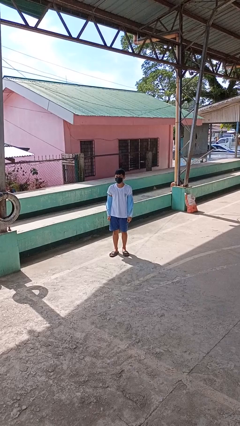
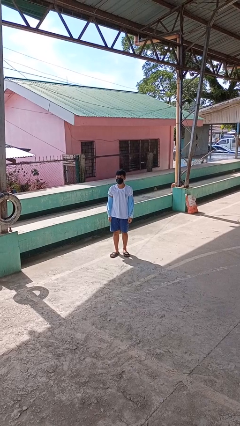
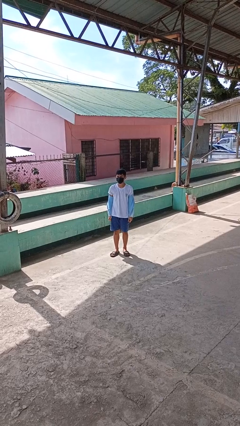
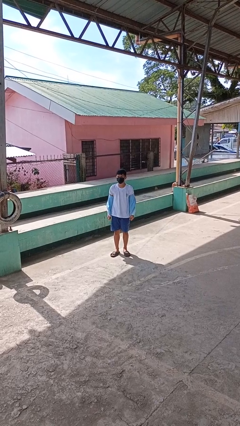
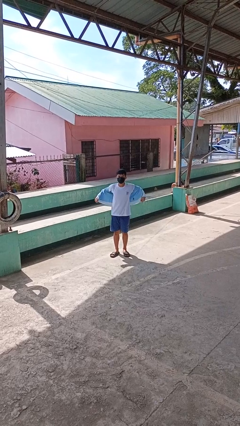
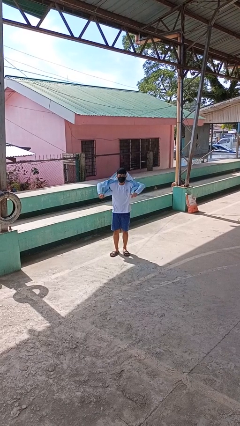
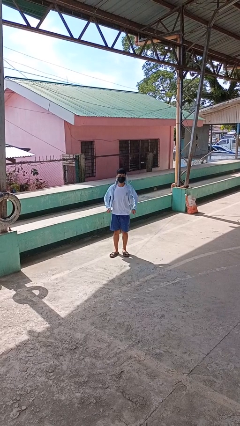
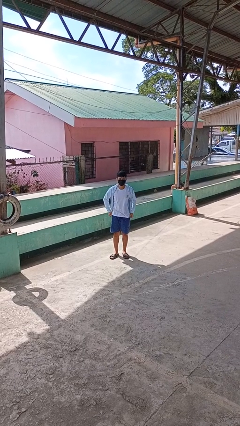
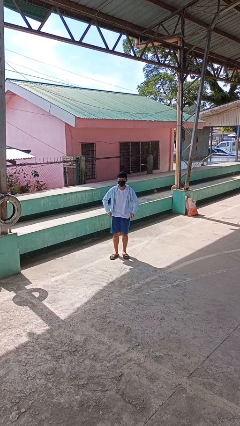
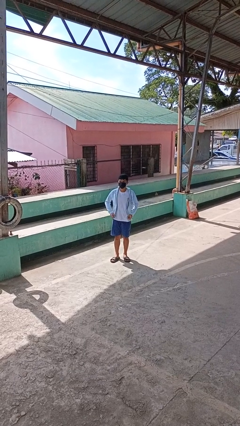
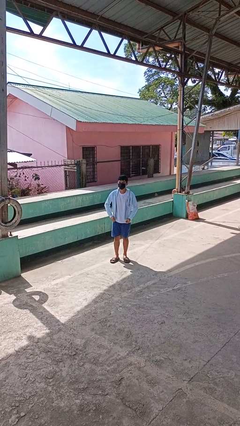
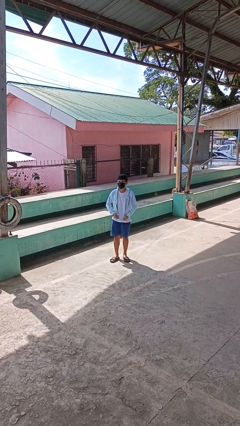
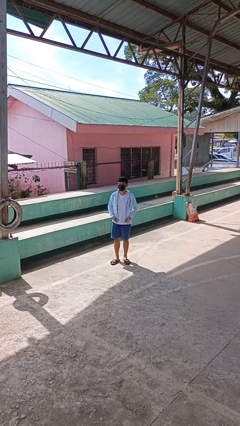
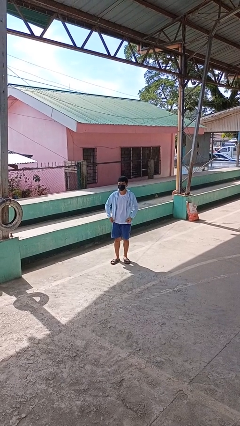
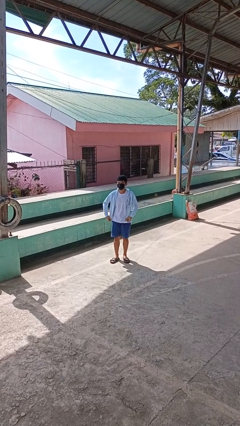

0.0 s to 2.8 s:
person puts on jacket

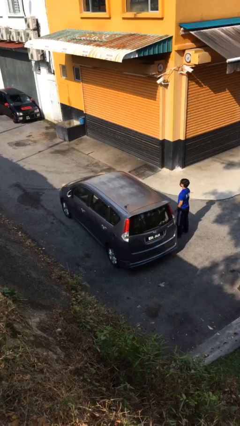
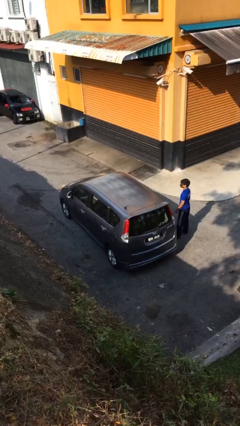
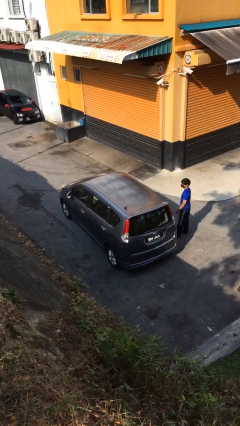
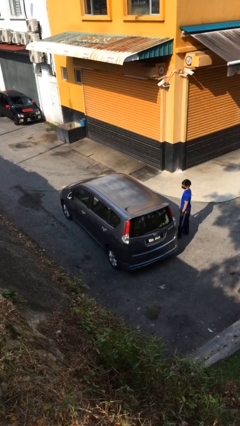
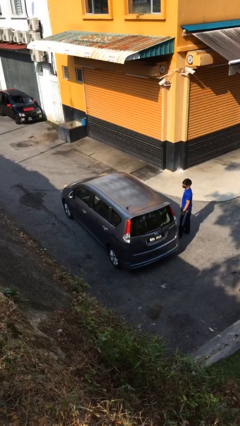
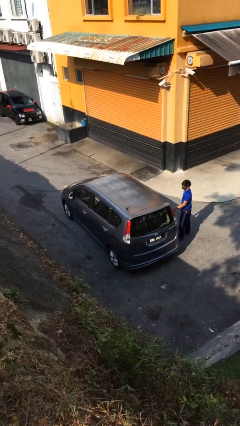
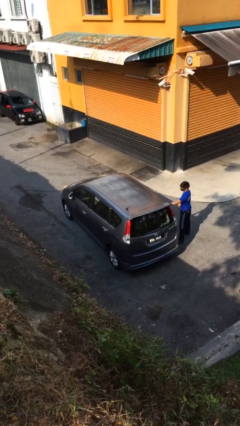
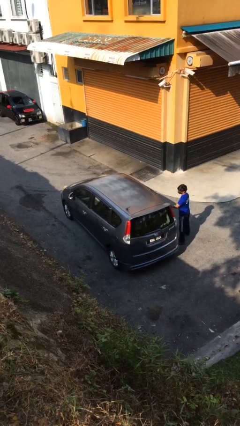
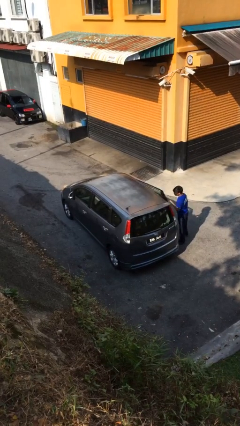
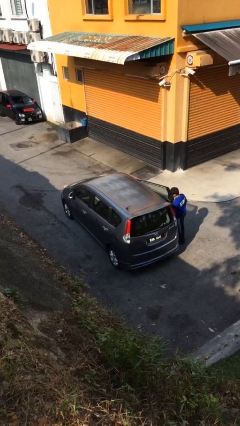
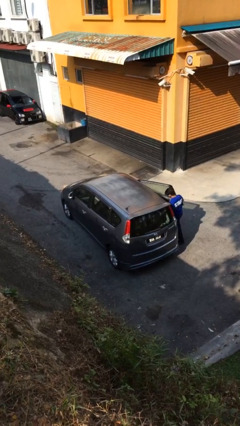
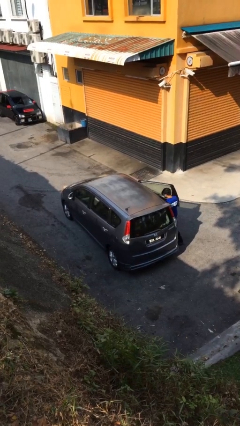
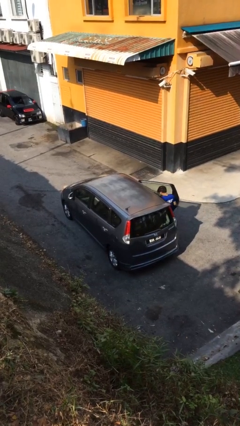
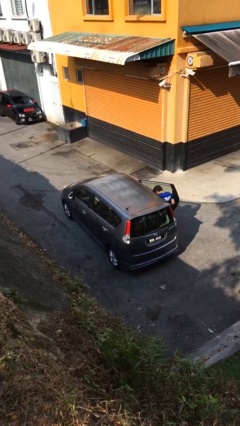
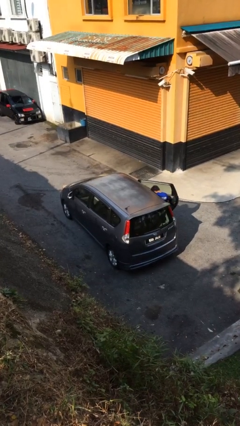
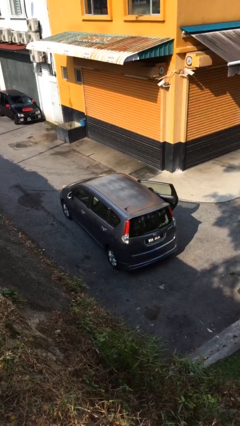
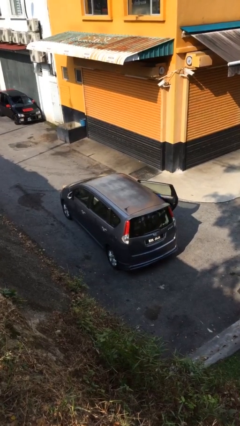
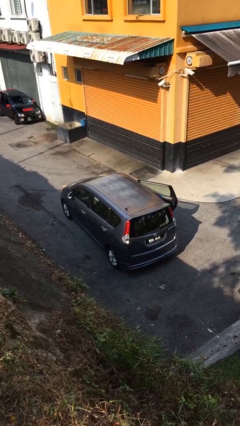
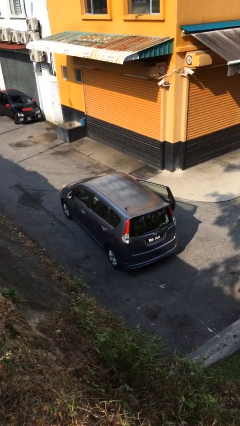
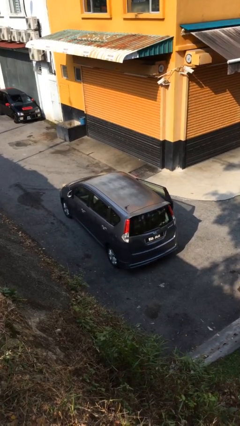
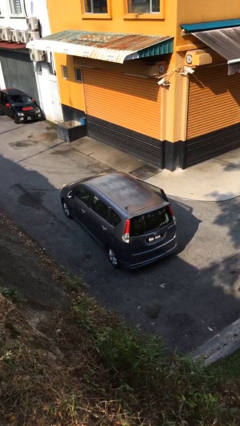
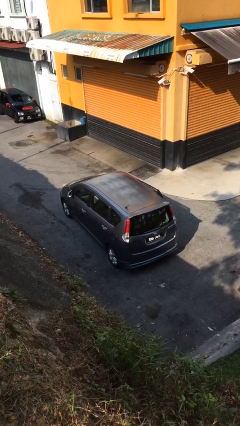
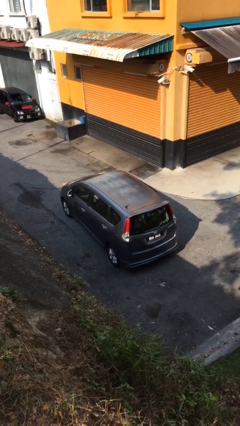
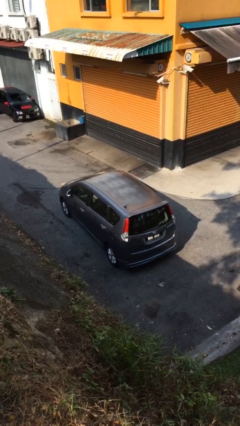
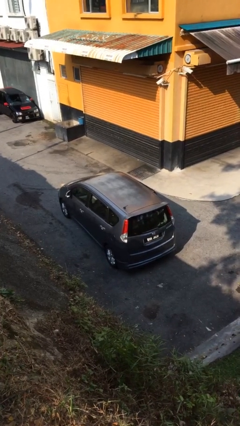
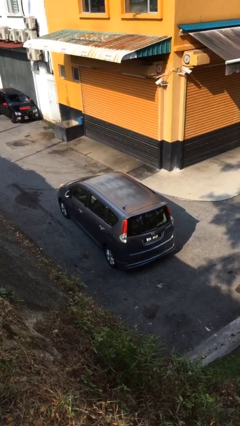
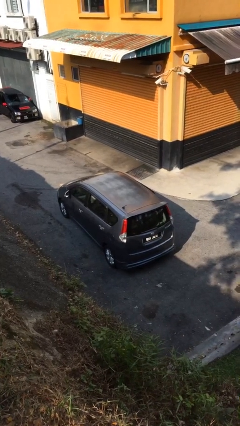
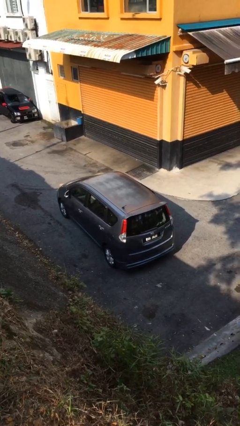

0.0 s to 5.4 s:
car picks up person

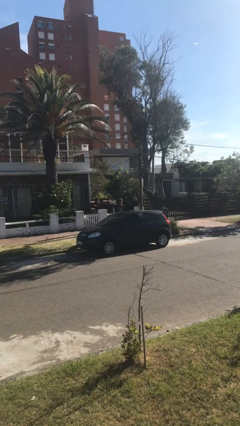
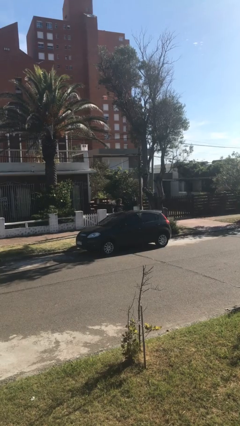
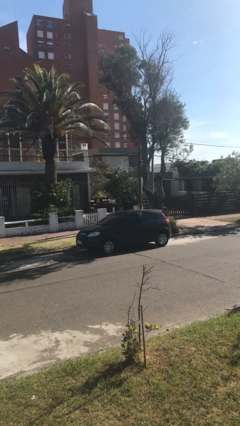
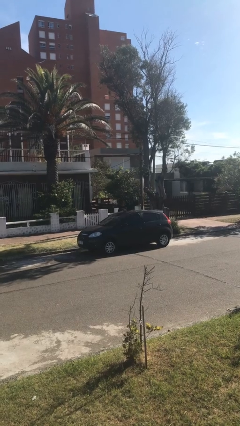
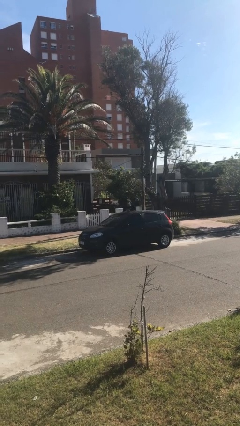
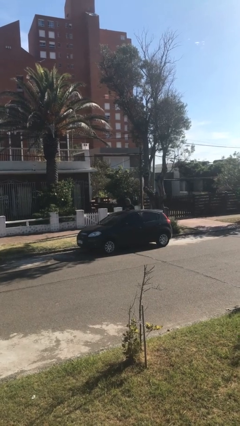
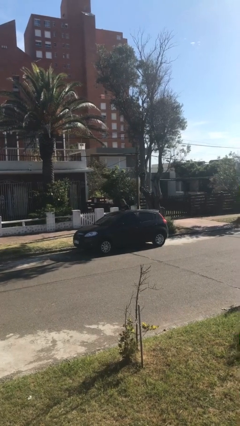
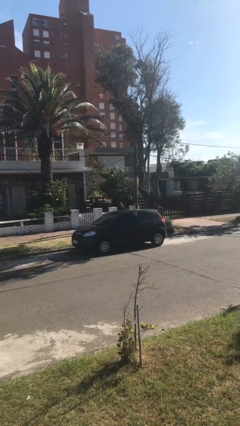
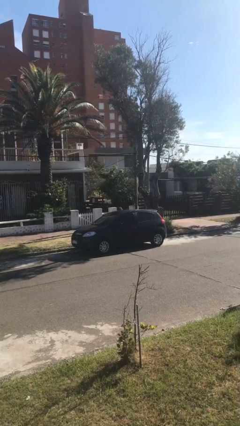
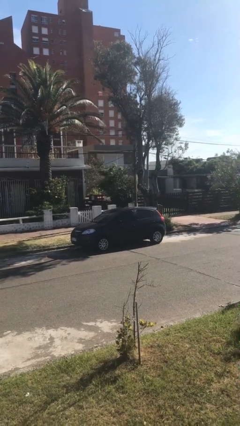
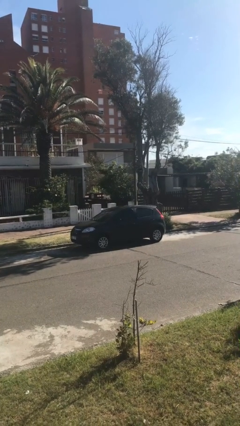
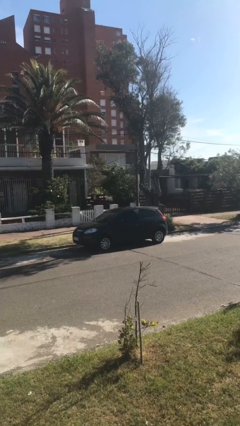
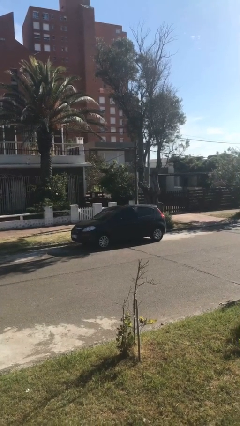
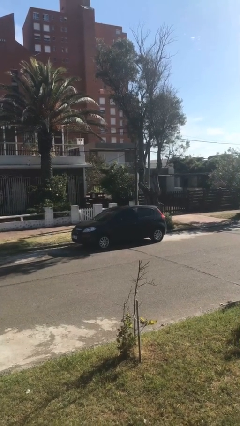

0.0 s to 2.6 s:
person enters car

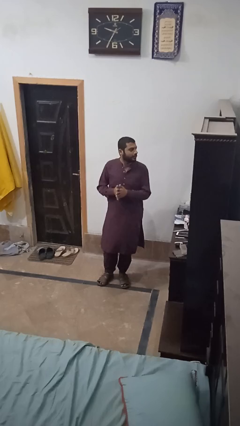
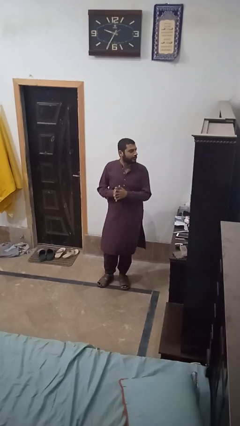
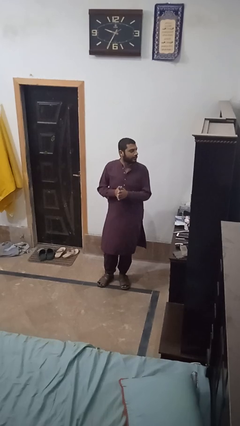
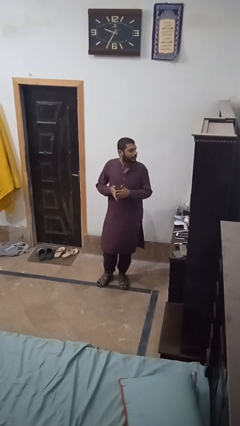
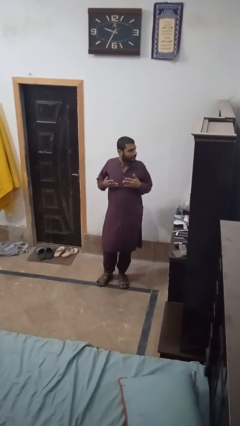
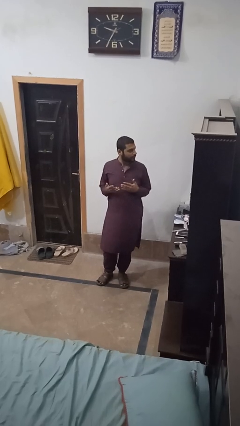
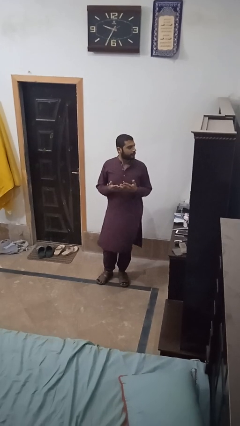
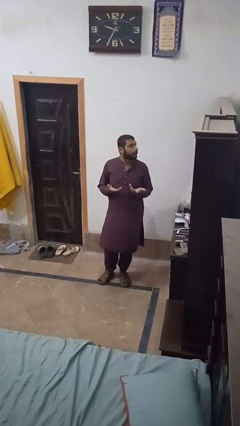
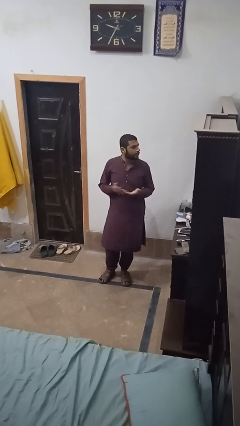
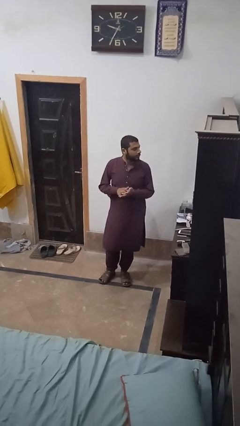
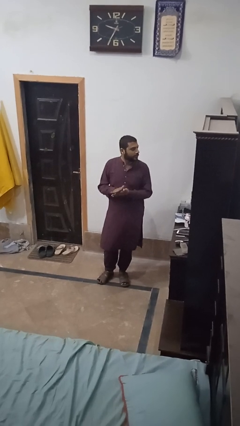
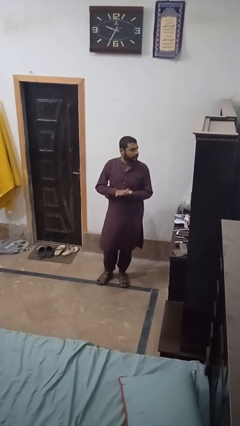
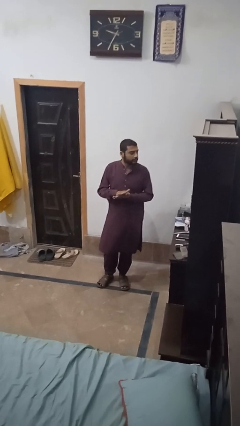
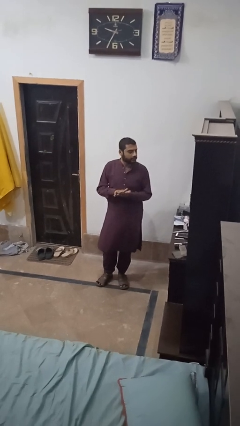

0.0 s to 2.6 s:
person shrugs

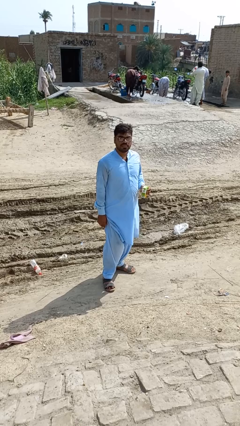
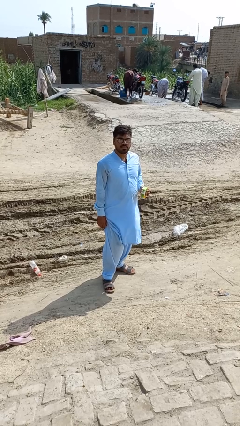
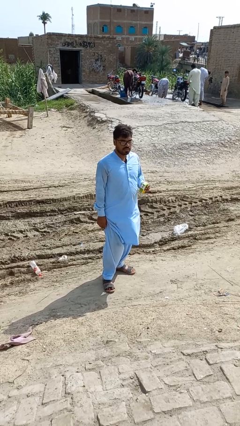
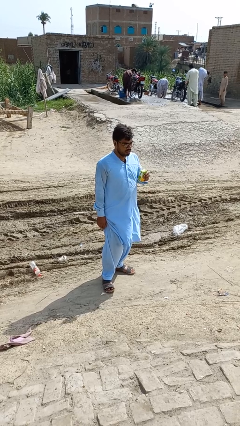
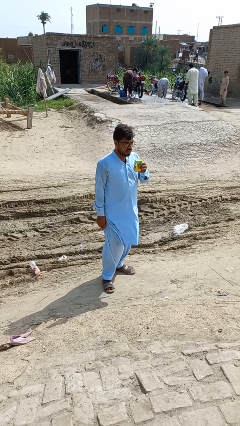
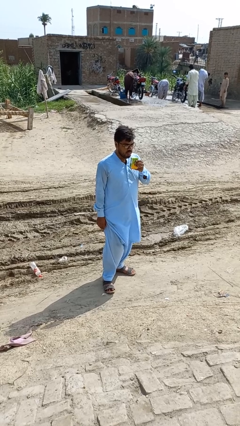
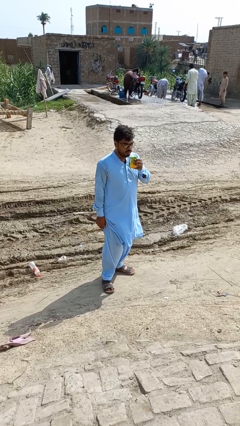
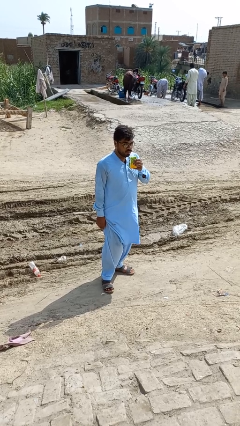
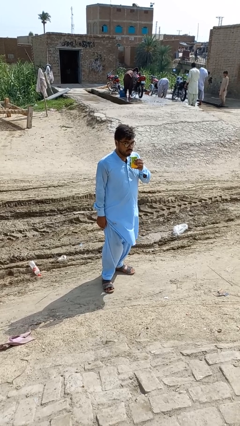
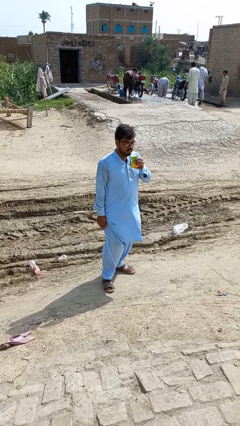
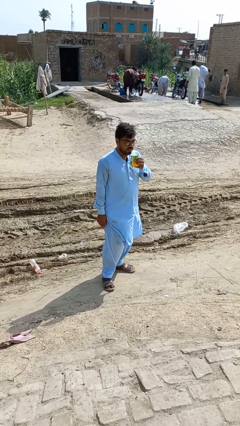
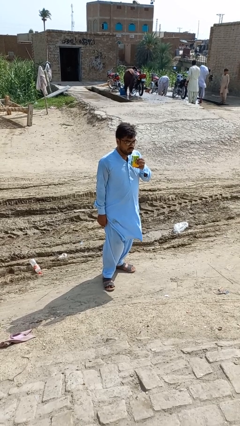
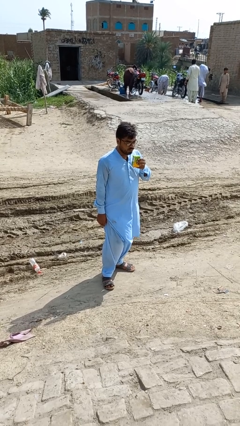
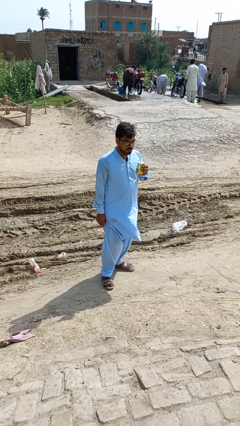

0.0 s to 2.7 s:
person drinks from straw

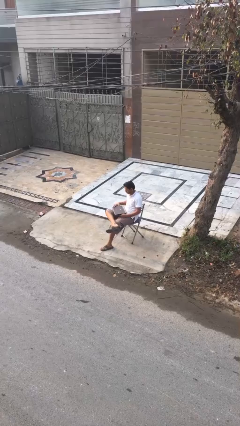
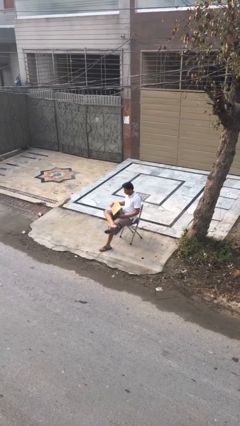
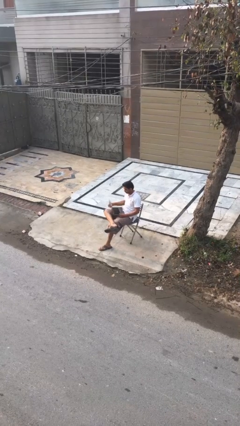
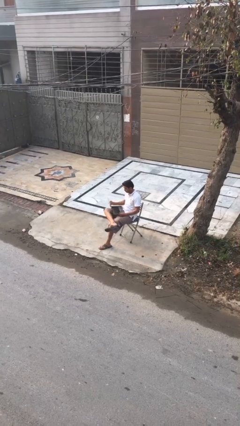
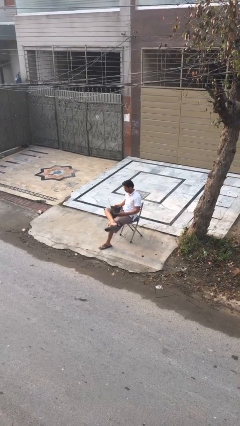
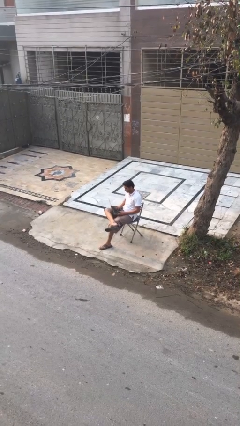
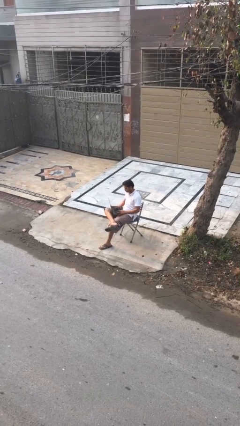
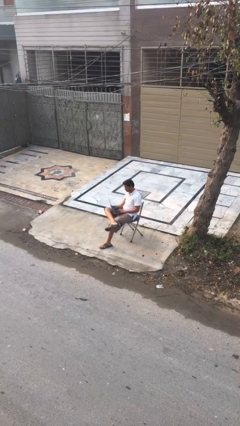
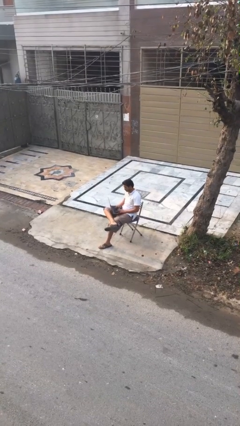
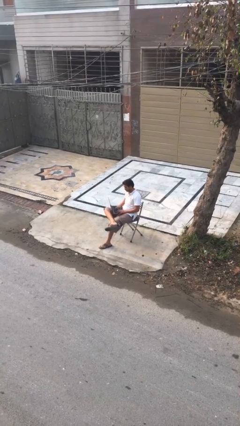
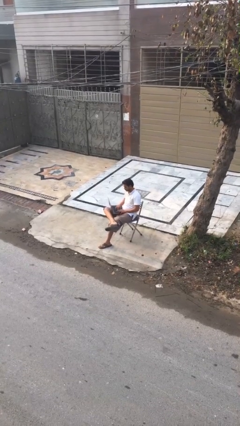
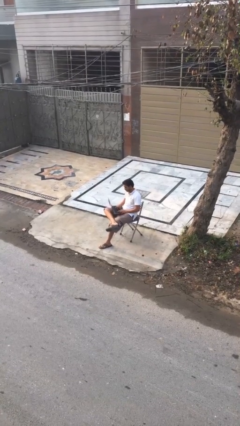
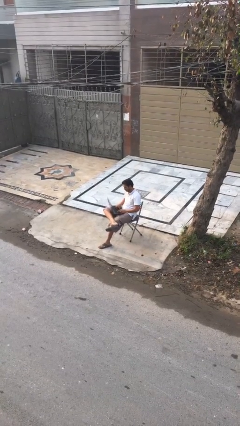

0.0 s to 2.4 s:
person interacts with laptop
